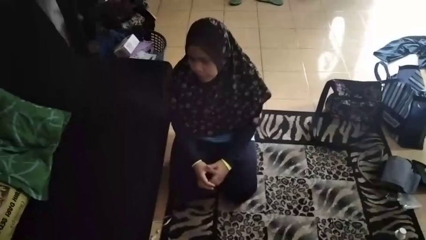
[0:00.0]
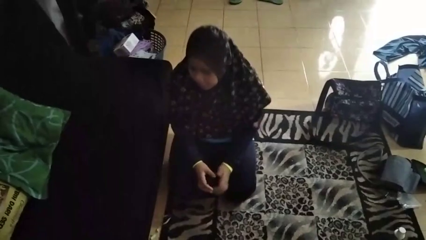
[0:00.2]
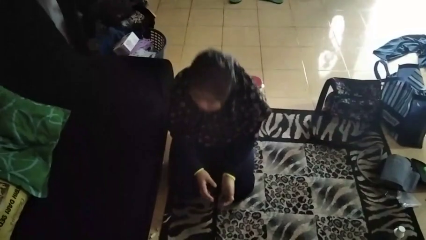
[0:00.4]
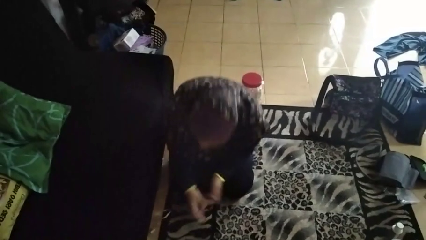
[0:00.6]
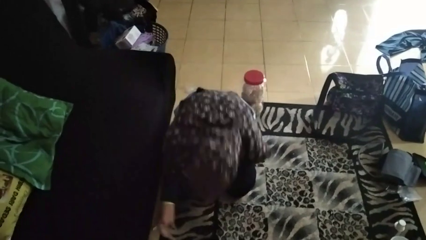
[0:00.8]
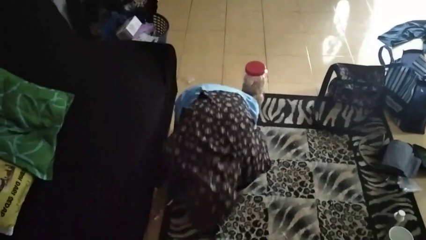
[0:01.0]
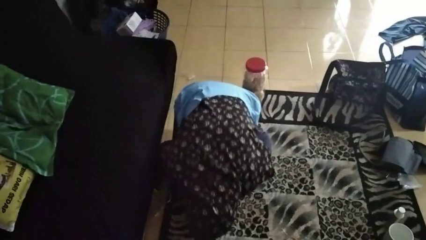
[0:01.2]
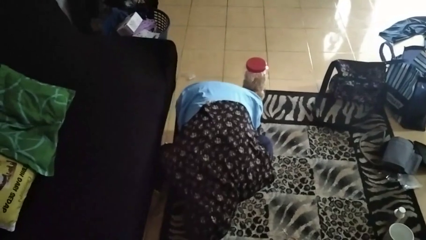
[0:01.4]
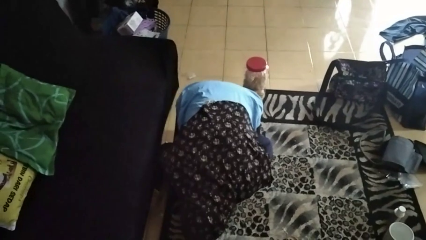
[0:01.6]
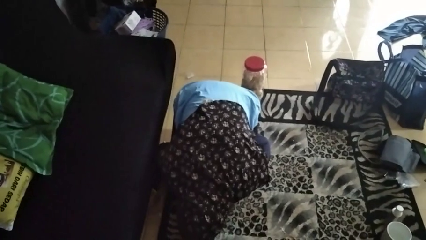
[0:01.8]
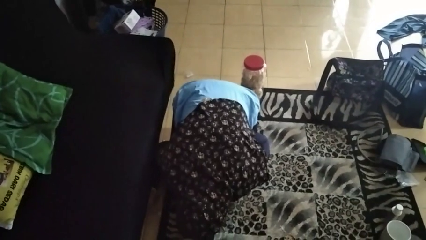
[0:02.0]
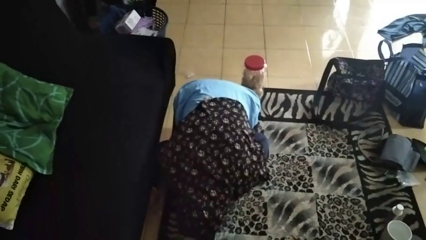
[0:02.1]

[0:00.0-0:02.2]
person searches under couch

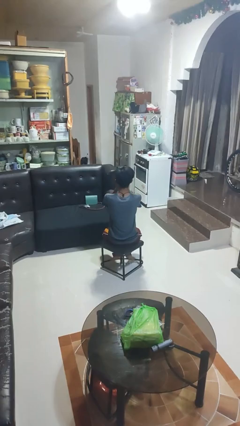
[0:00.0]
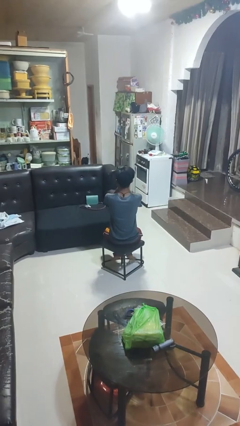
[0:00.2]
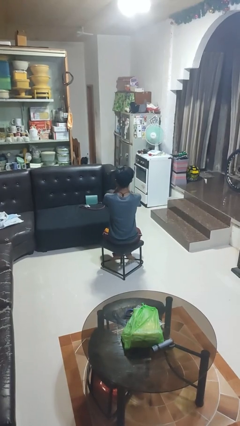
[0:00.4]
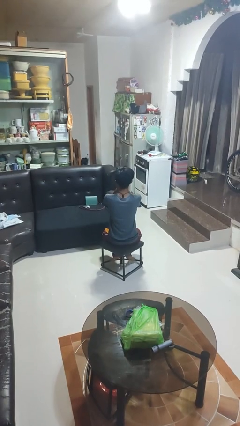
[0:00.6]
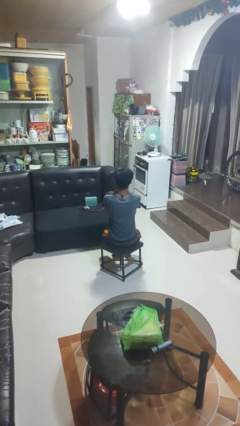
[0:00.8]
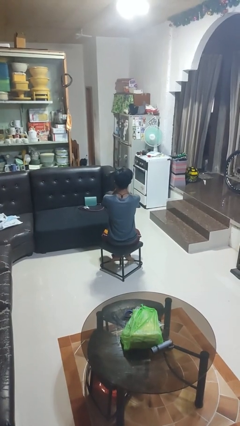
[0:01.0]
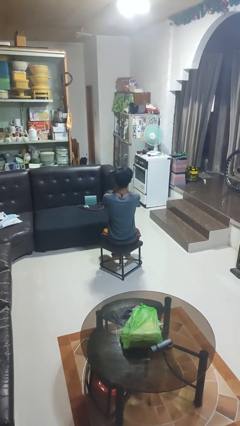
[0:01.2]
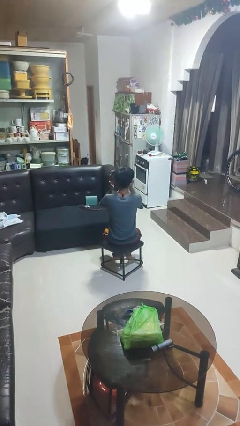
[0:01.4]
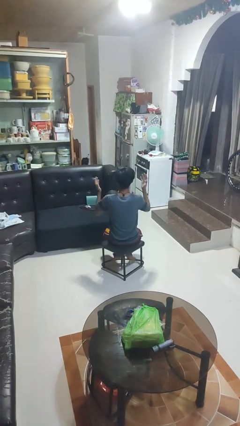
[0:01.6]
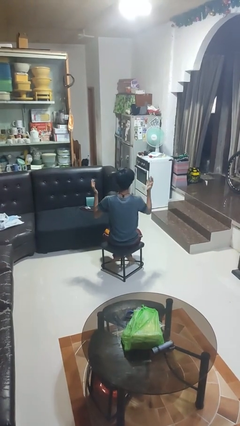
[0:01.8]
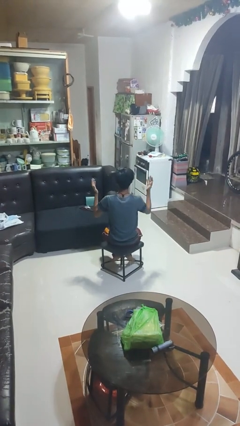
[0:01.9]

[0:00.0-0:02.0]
person covers face with hands

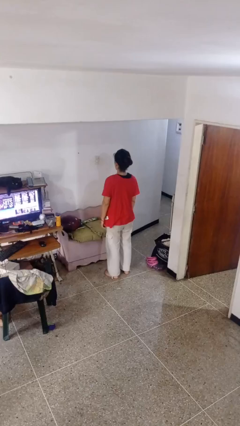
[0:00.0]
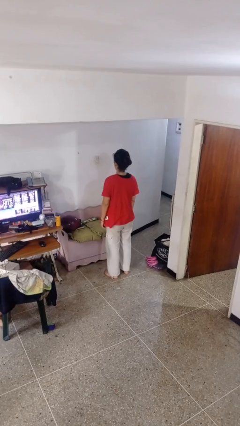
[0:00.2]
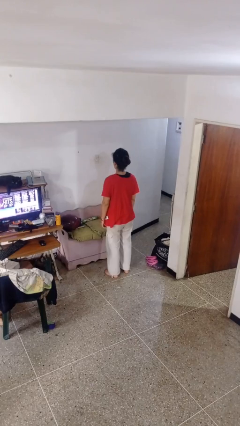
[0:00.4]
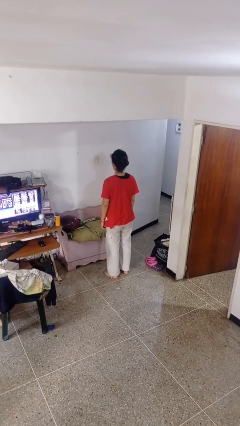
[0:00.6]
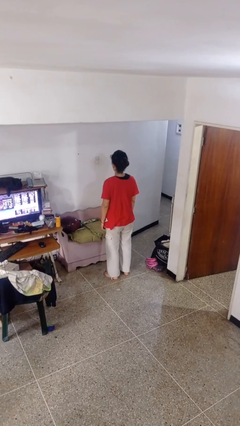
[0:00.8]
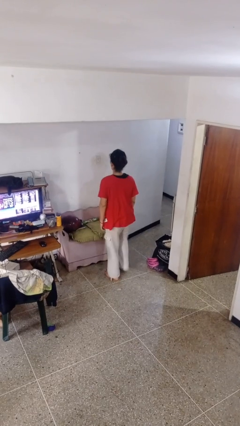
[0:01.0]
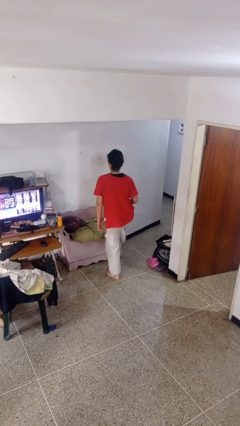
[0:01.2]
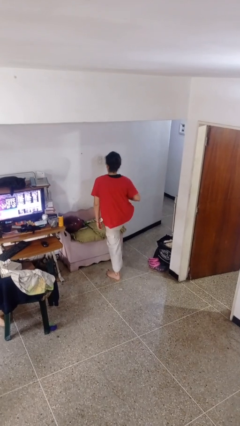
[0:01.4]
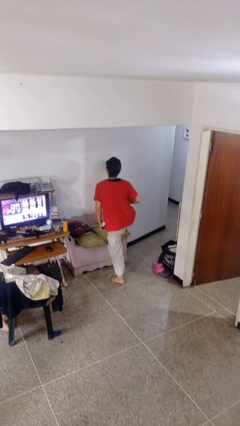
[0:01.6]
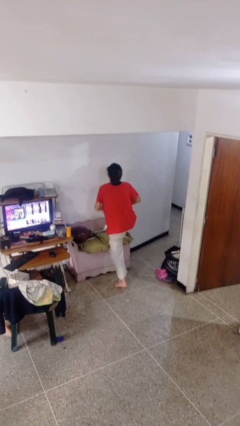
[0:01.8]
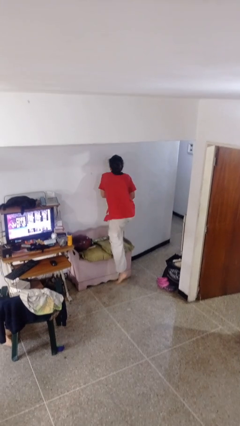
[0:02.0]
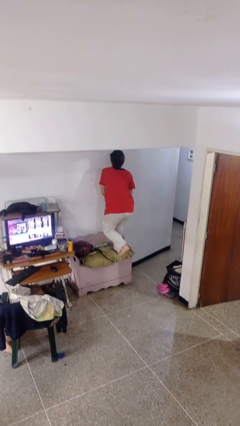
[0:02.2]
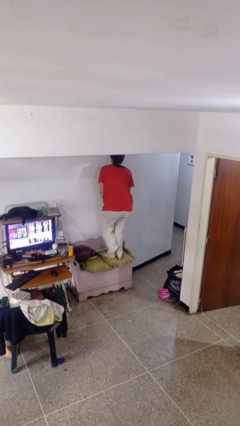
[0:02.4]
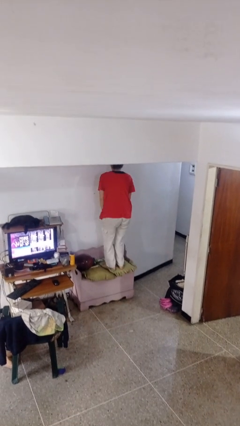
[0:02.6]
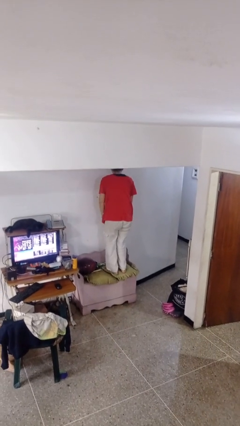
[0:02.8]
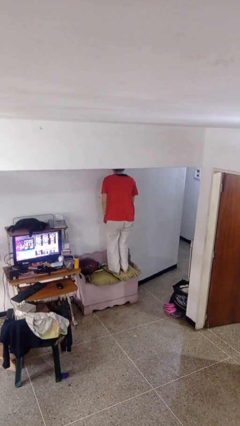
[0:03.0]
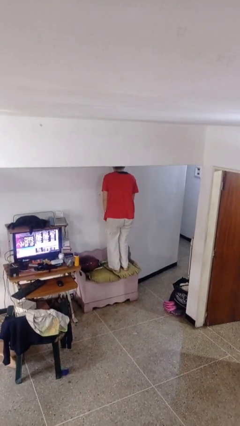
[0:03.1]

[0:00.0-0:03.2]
person climbs on couch

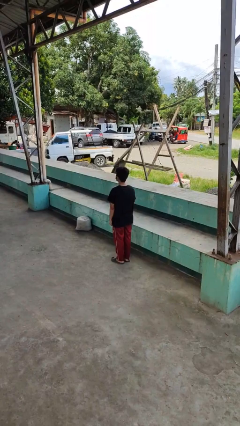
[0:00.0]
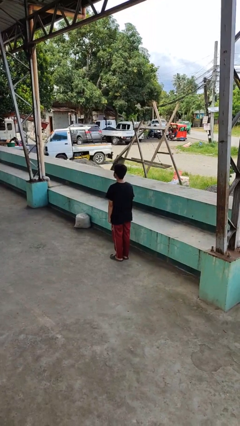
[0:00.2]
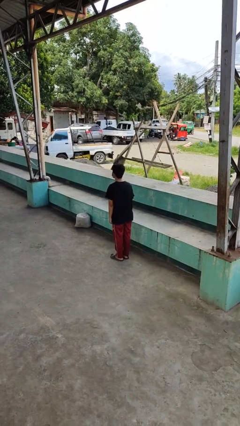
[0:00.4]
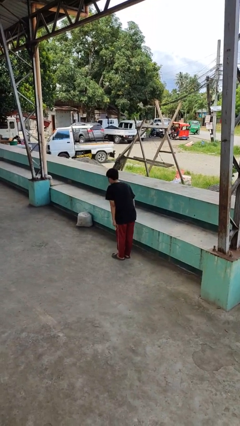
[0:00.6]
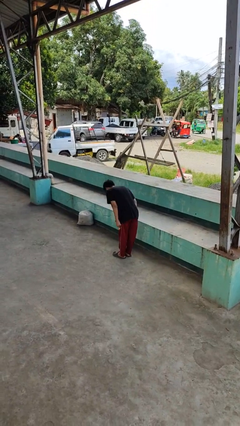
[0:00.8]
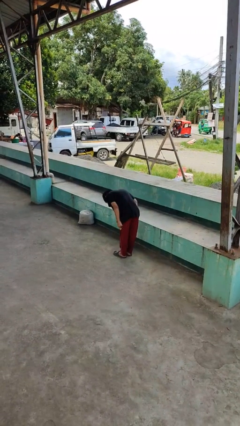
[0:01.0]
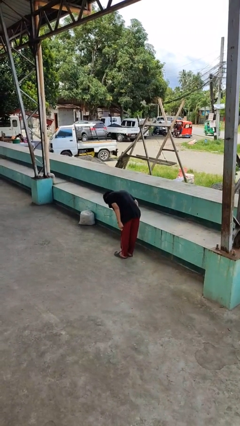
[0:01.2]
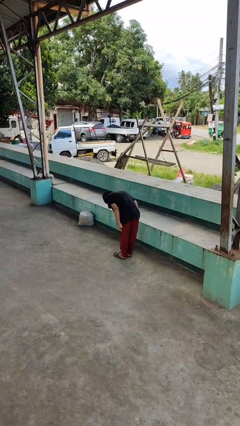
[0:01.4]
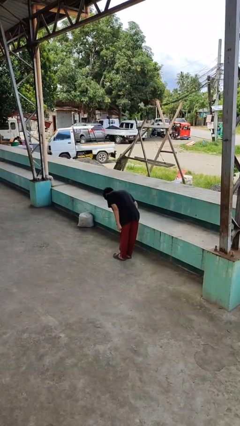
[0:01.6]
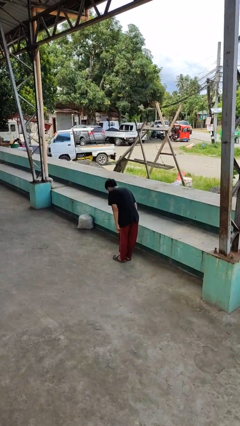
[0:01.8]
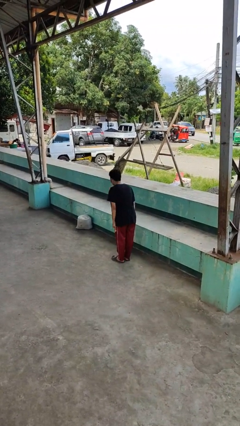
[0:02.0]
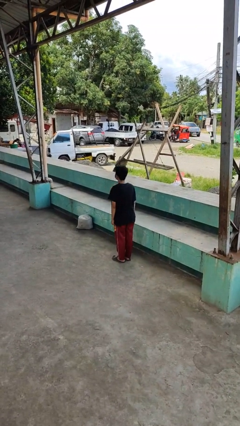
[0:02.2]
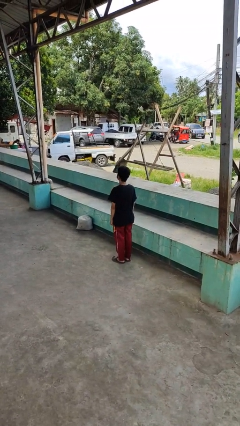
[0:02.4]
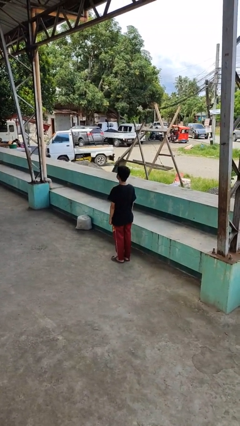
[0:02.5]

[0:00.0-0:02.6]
person bows

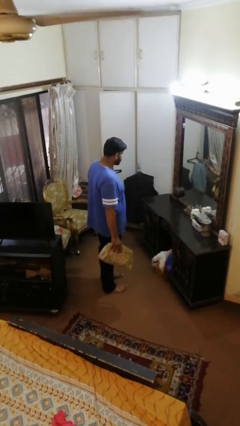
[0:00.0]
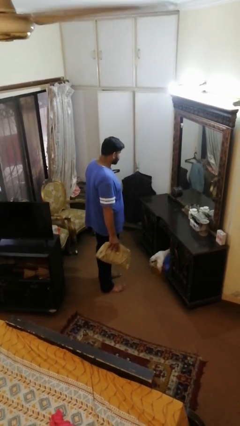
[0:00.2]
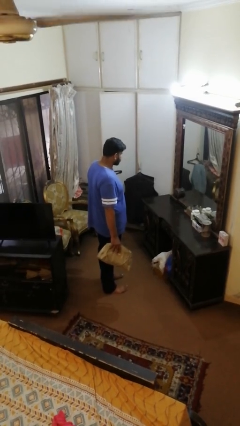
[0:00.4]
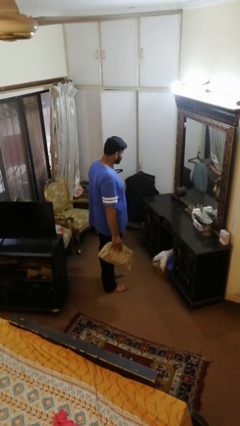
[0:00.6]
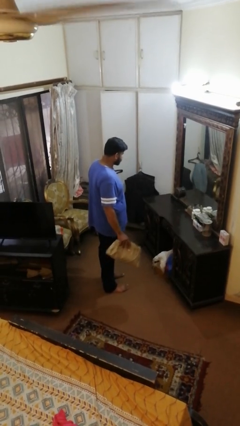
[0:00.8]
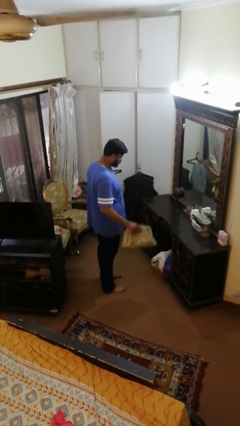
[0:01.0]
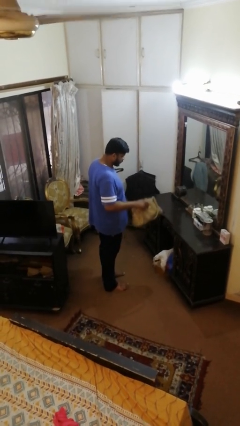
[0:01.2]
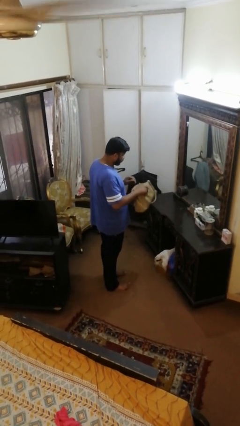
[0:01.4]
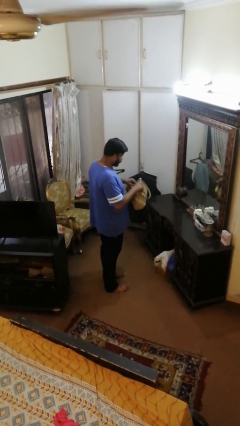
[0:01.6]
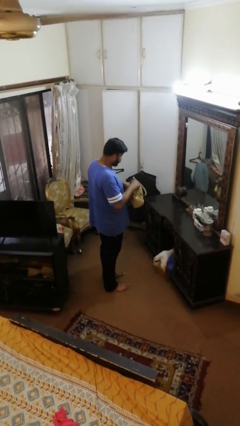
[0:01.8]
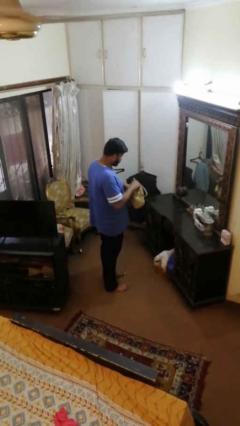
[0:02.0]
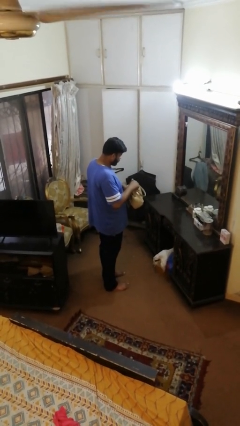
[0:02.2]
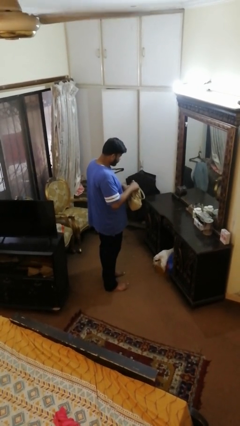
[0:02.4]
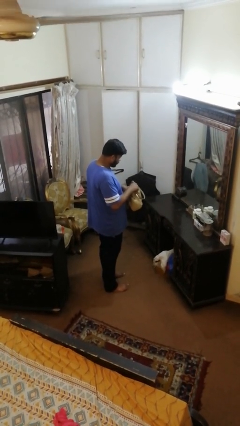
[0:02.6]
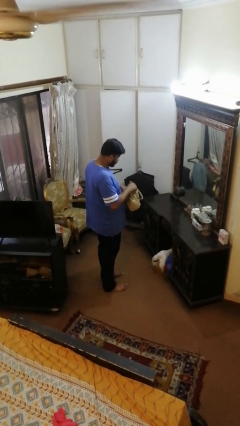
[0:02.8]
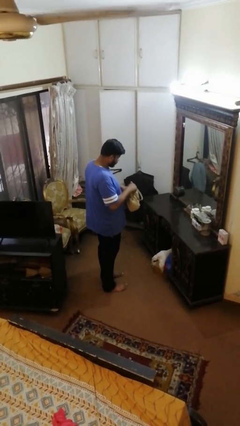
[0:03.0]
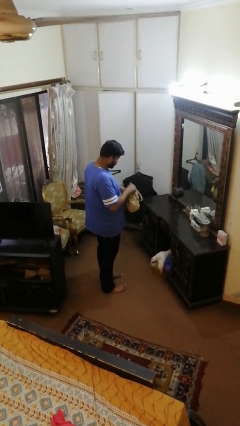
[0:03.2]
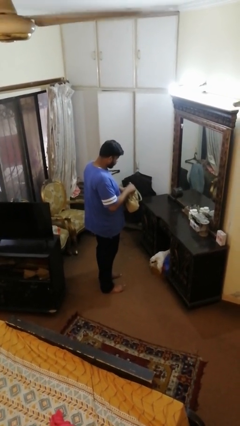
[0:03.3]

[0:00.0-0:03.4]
person searches in purse

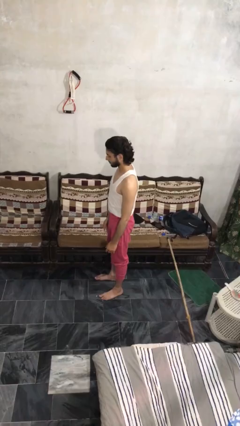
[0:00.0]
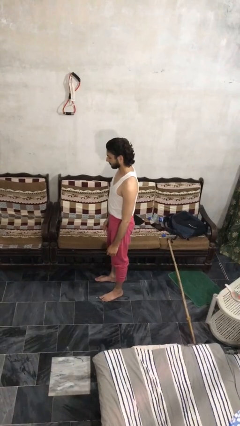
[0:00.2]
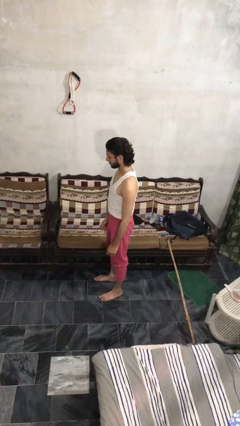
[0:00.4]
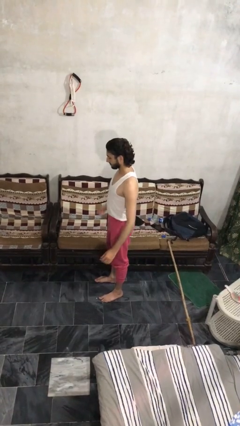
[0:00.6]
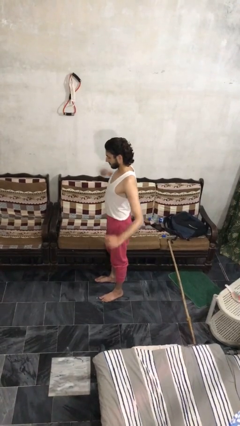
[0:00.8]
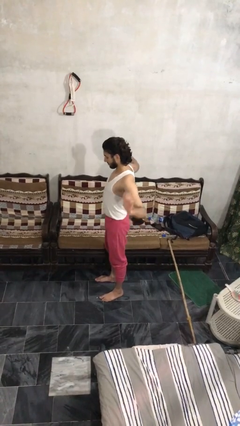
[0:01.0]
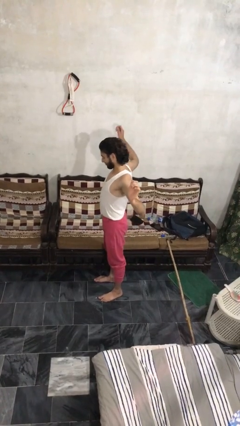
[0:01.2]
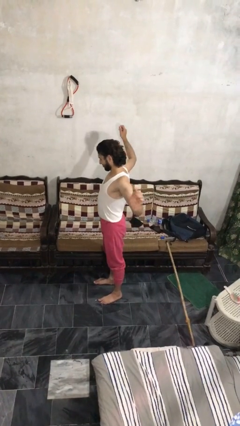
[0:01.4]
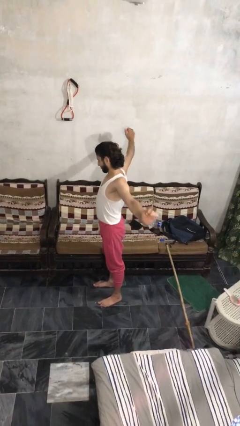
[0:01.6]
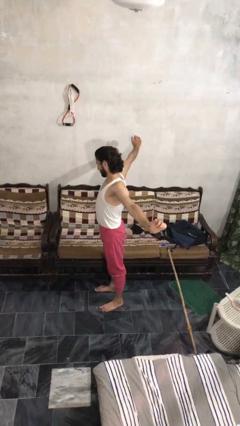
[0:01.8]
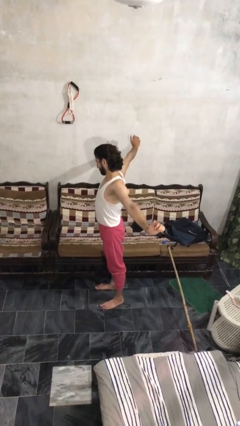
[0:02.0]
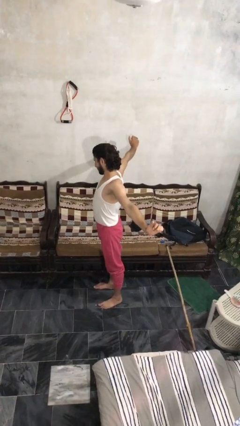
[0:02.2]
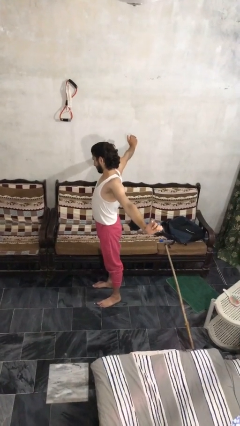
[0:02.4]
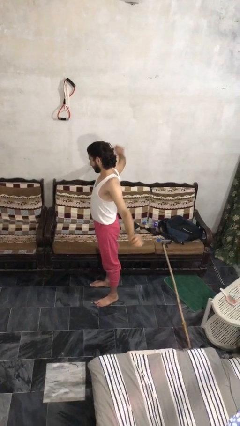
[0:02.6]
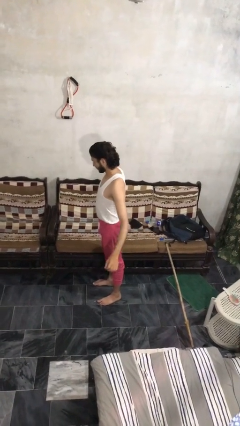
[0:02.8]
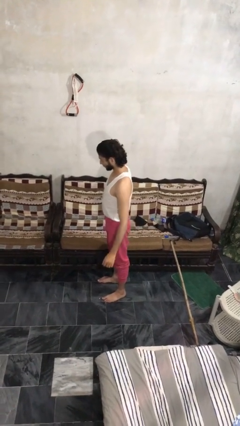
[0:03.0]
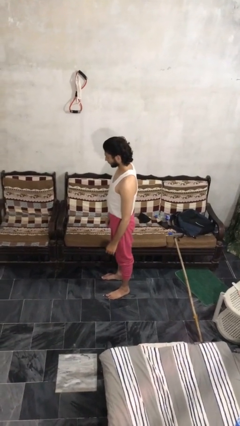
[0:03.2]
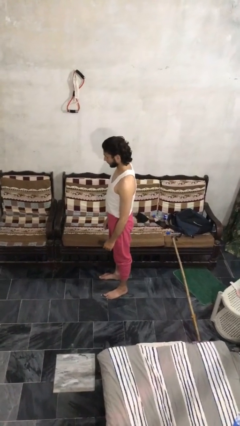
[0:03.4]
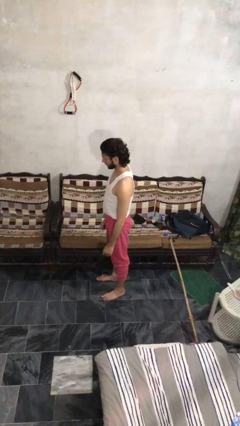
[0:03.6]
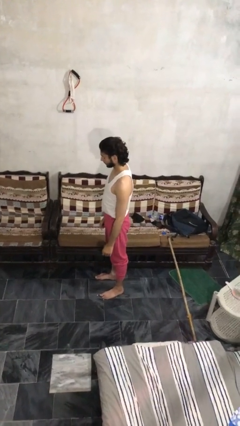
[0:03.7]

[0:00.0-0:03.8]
person stretches arms to side

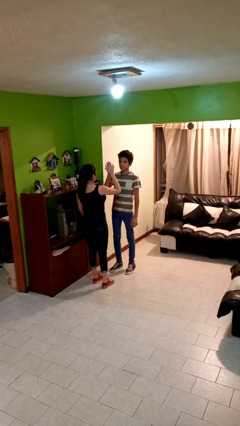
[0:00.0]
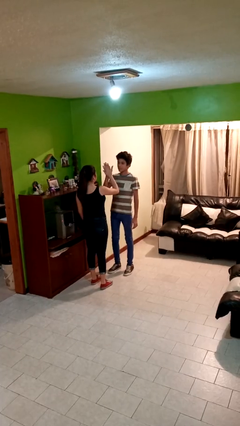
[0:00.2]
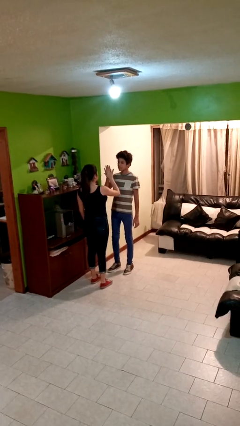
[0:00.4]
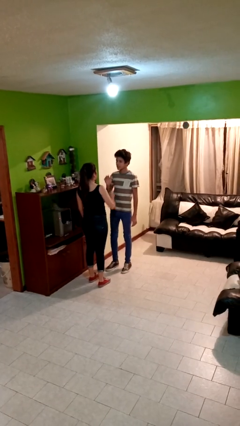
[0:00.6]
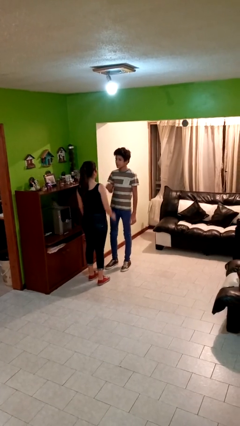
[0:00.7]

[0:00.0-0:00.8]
person highfives hand
